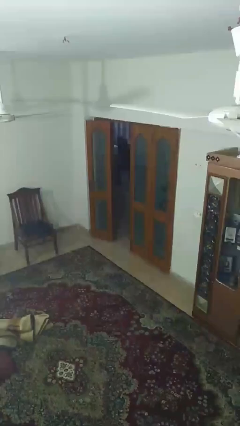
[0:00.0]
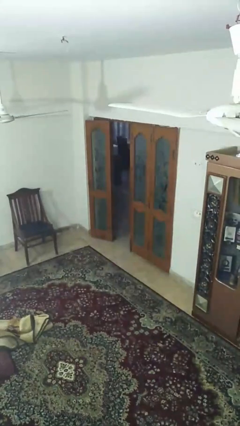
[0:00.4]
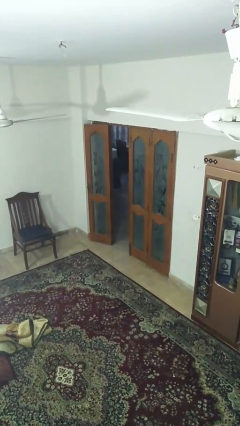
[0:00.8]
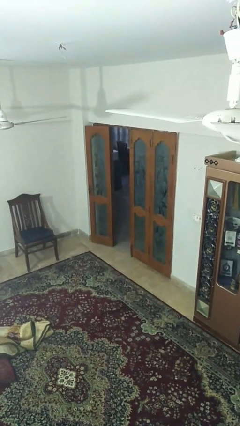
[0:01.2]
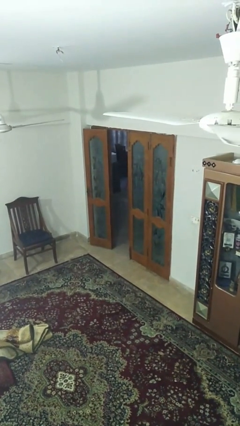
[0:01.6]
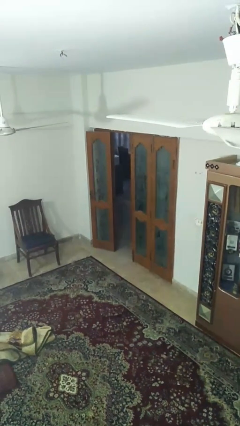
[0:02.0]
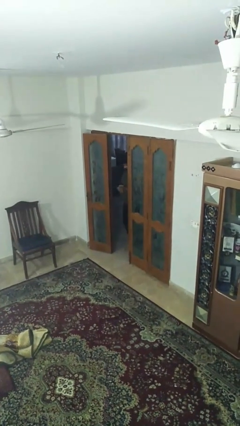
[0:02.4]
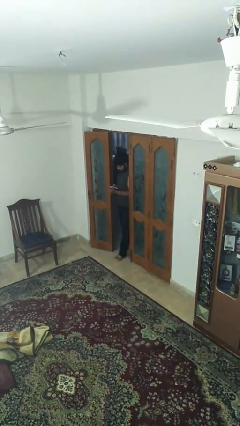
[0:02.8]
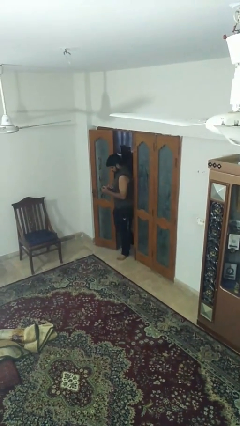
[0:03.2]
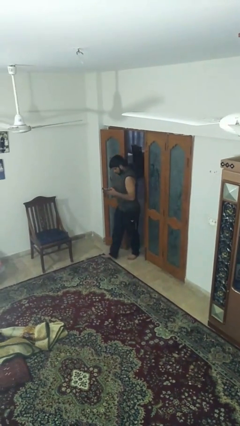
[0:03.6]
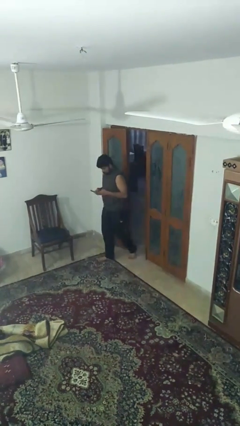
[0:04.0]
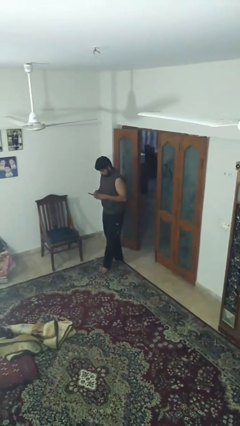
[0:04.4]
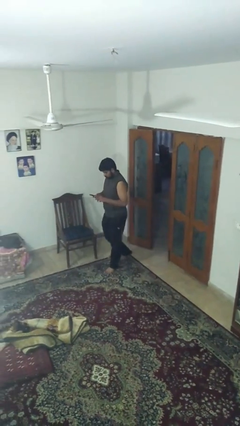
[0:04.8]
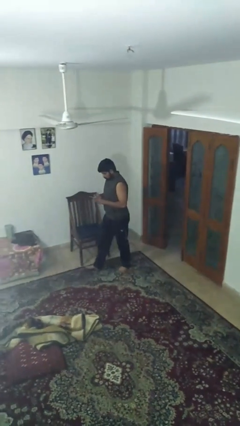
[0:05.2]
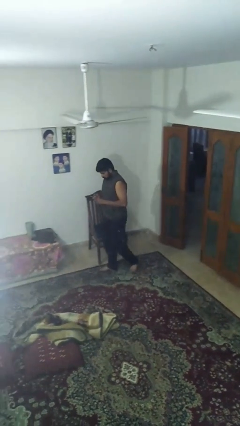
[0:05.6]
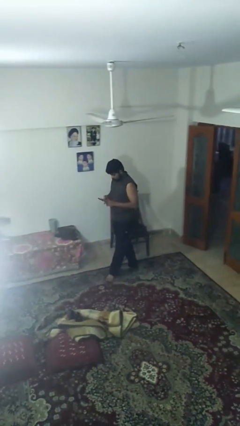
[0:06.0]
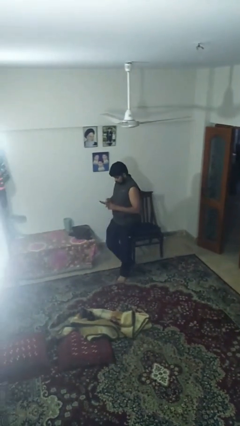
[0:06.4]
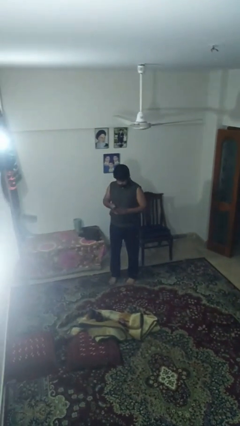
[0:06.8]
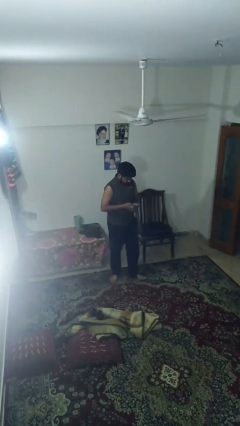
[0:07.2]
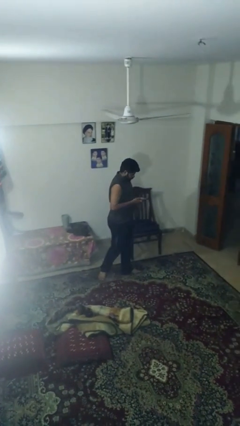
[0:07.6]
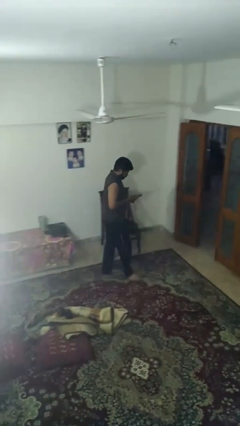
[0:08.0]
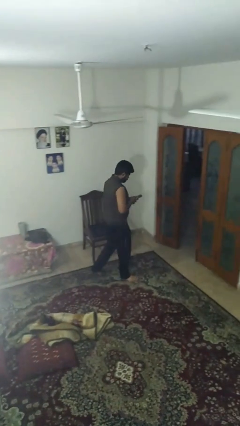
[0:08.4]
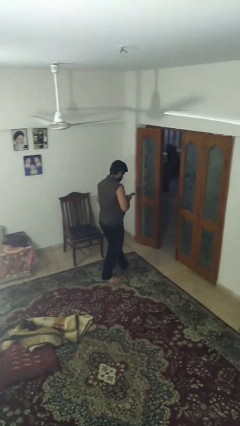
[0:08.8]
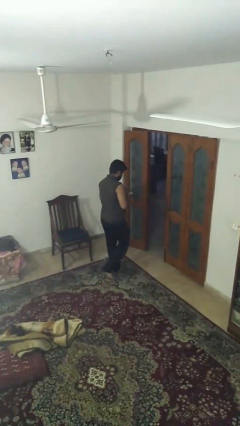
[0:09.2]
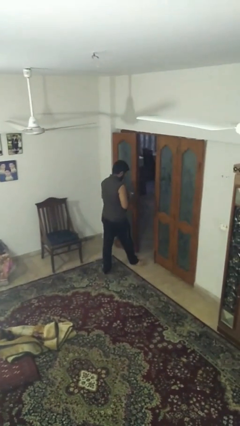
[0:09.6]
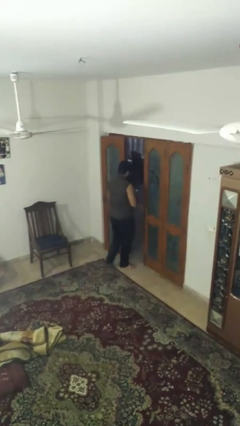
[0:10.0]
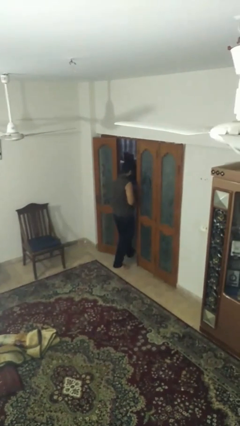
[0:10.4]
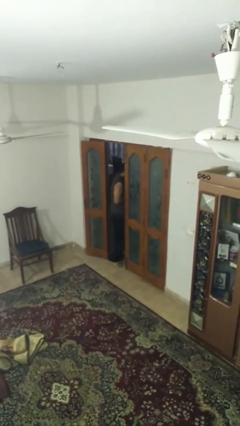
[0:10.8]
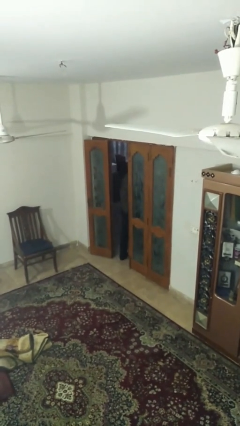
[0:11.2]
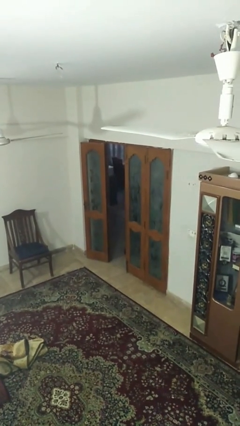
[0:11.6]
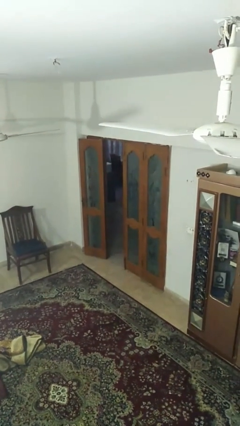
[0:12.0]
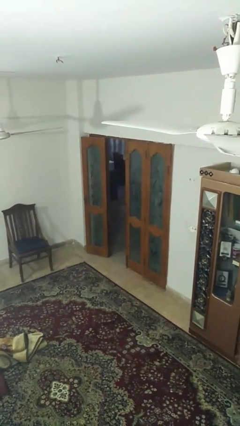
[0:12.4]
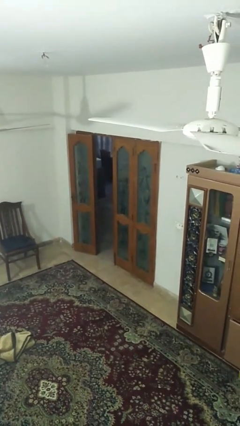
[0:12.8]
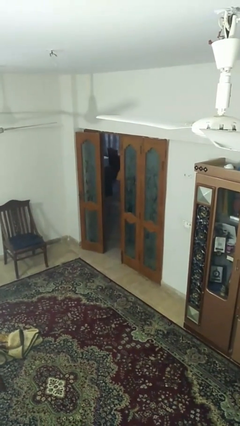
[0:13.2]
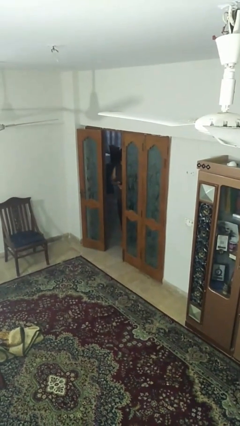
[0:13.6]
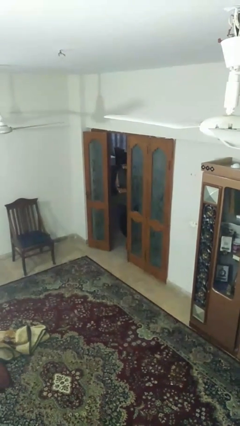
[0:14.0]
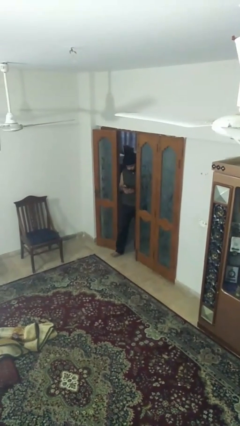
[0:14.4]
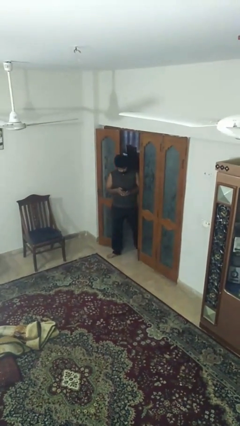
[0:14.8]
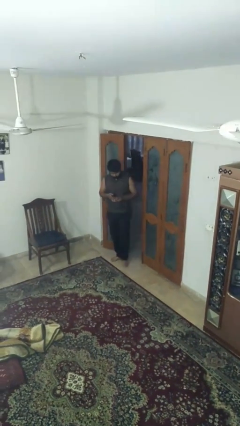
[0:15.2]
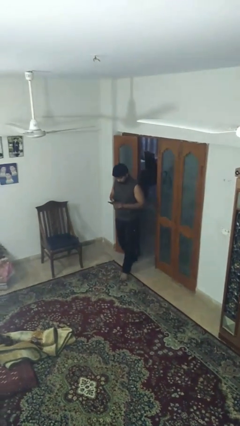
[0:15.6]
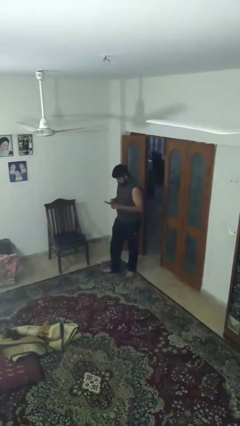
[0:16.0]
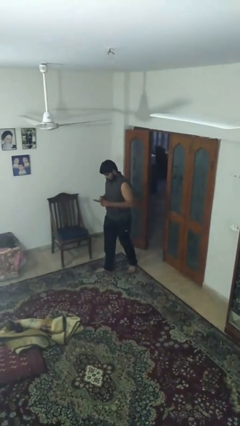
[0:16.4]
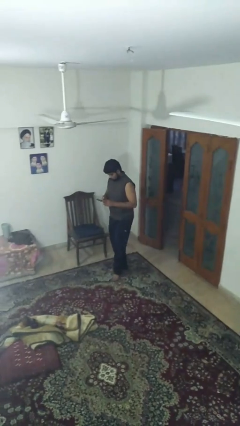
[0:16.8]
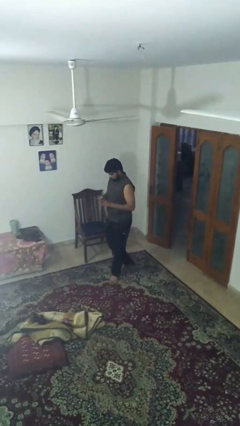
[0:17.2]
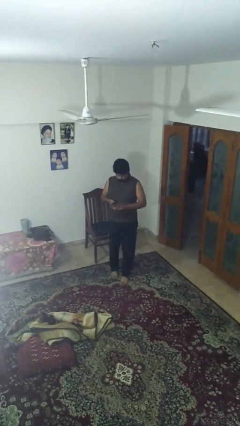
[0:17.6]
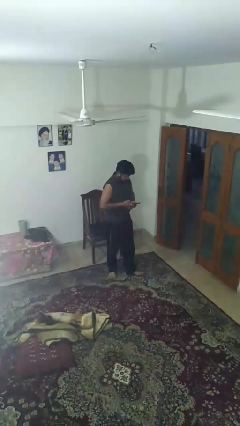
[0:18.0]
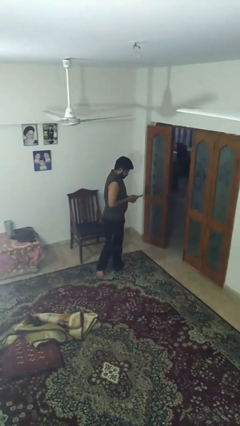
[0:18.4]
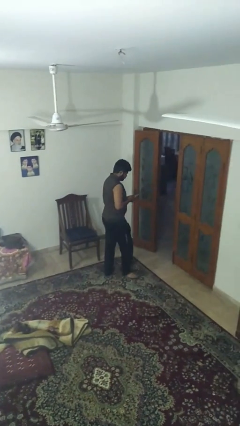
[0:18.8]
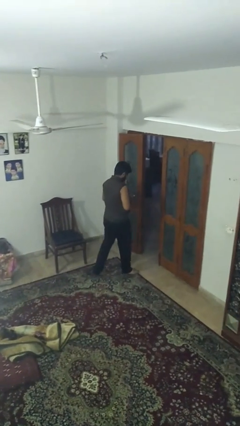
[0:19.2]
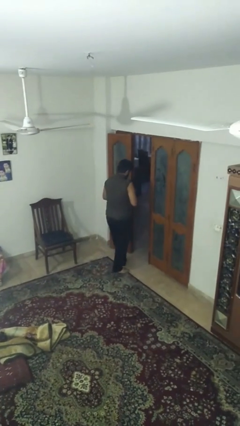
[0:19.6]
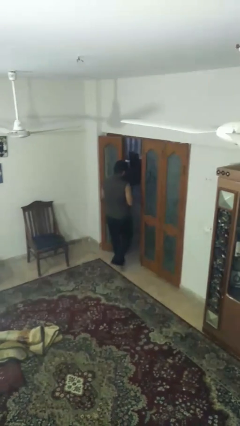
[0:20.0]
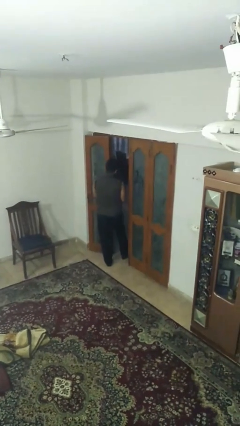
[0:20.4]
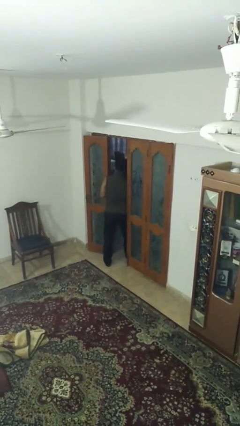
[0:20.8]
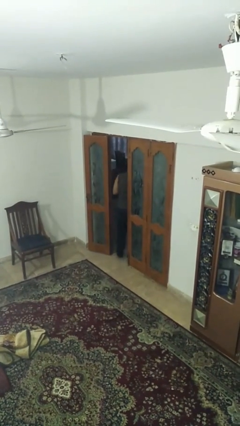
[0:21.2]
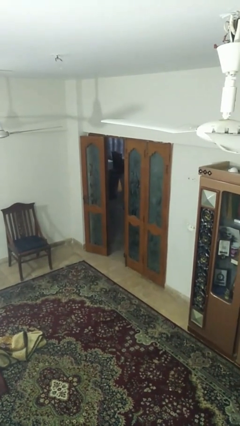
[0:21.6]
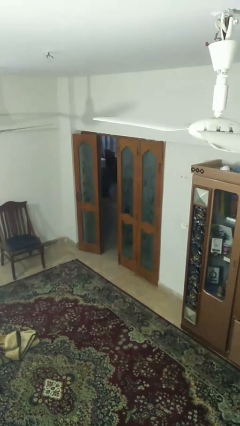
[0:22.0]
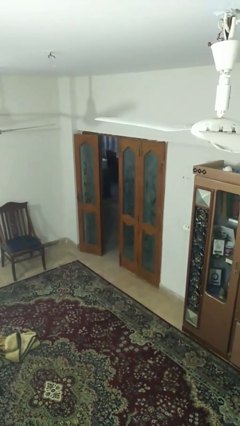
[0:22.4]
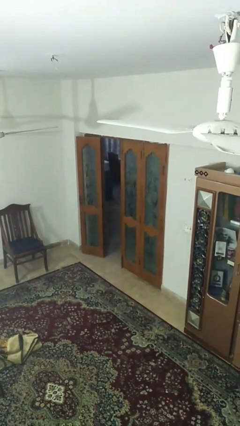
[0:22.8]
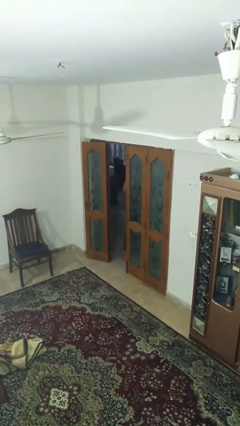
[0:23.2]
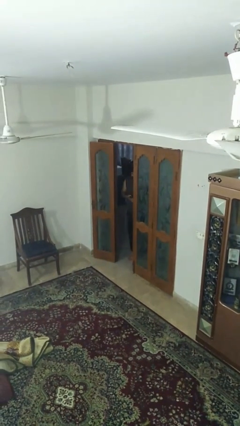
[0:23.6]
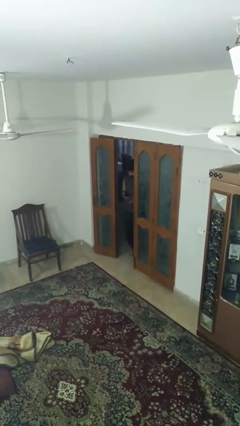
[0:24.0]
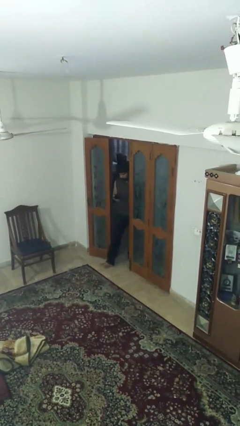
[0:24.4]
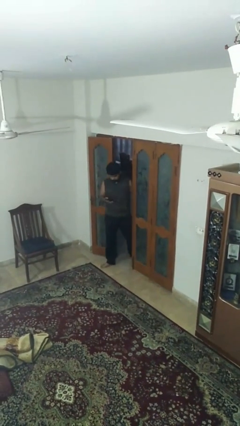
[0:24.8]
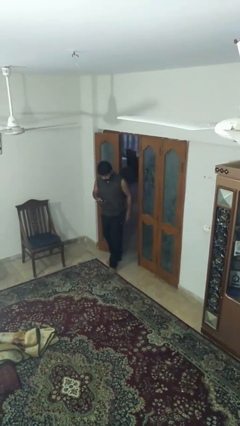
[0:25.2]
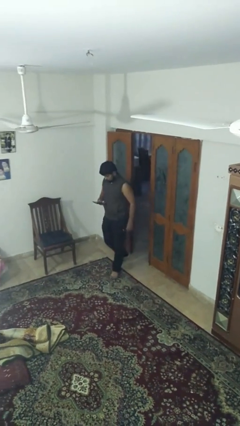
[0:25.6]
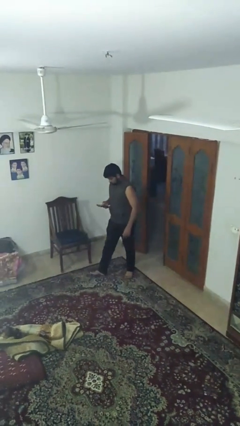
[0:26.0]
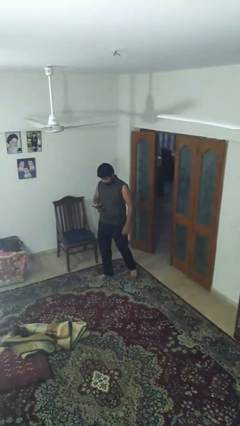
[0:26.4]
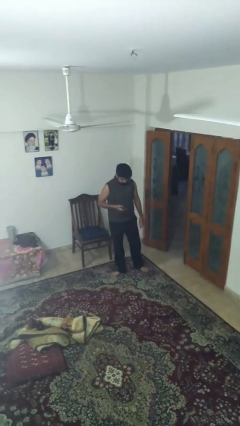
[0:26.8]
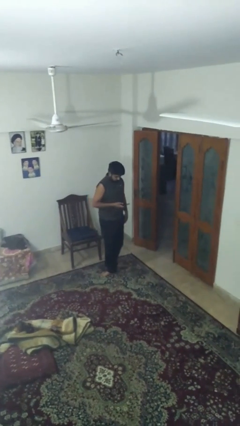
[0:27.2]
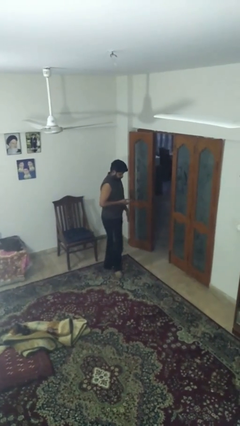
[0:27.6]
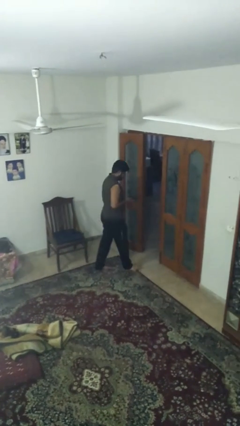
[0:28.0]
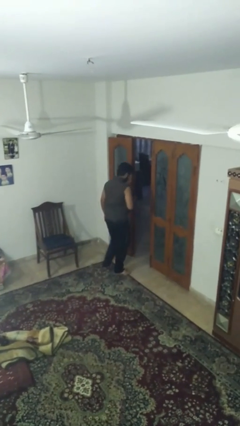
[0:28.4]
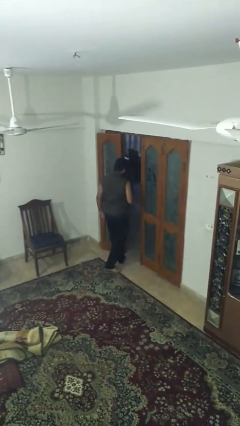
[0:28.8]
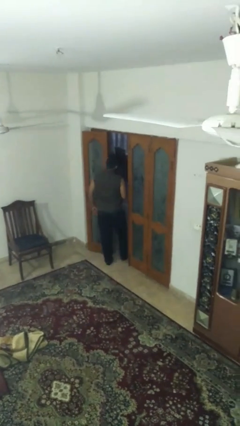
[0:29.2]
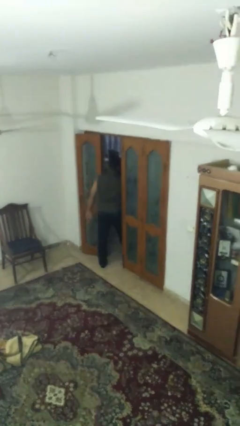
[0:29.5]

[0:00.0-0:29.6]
person texts on phone

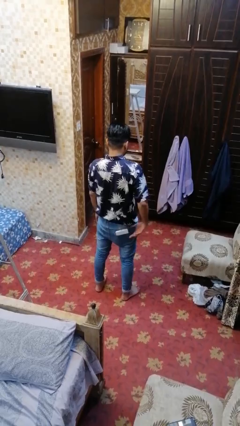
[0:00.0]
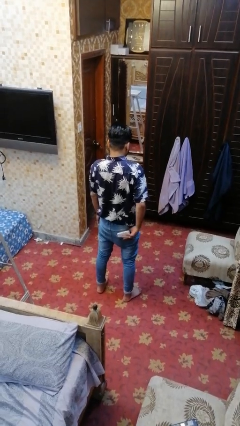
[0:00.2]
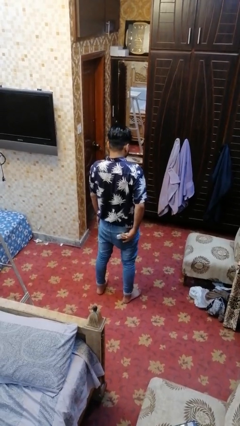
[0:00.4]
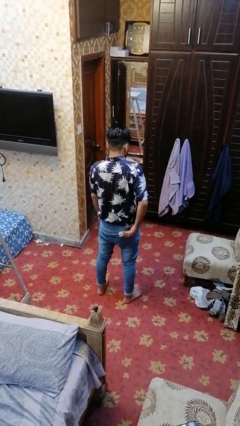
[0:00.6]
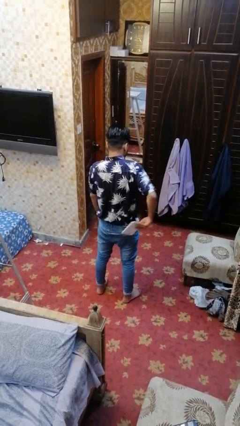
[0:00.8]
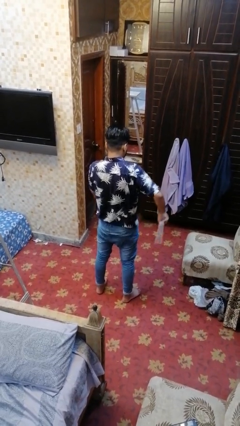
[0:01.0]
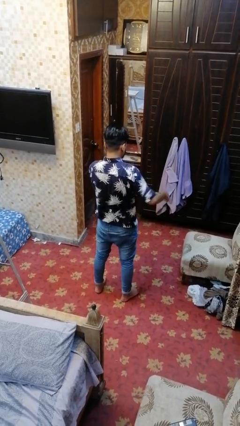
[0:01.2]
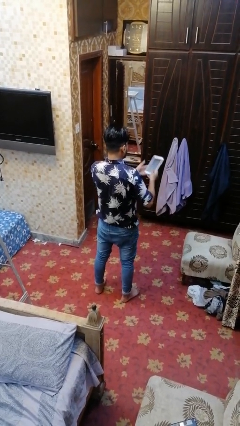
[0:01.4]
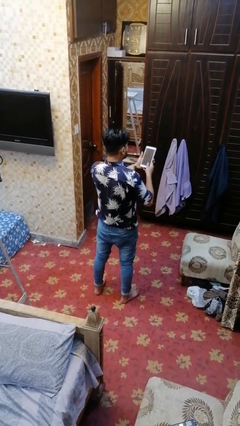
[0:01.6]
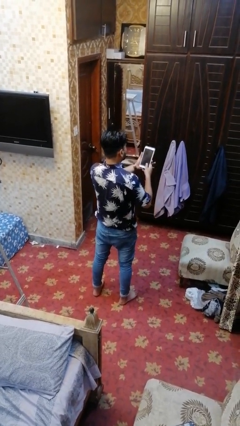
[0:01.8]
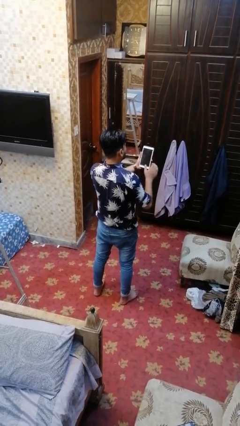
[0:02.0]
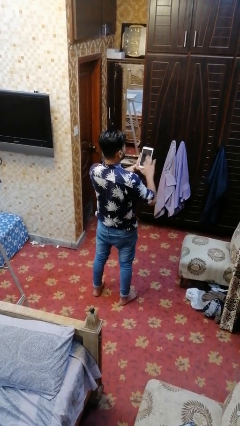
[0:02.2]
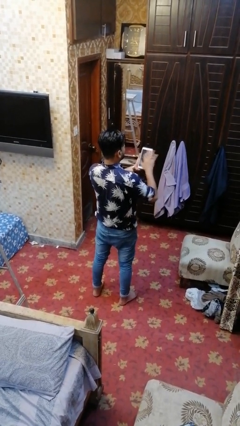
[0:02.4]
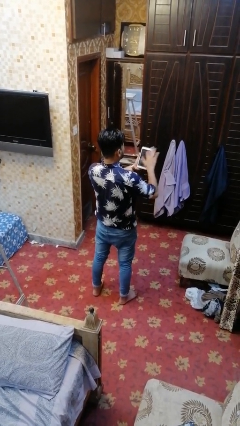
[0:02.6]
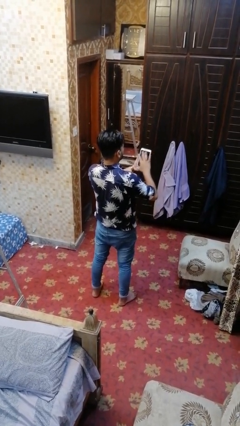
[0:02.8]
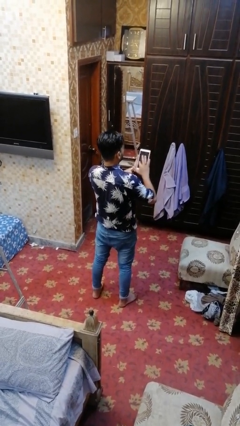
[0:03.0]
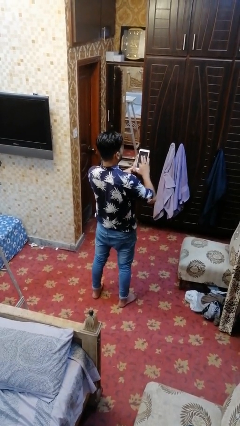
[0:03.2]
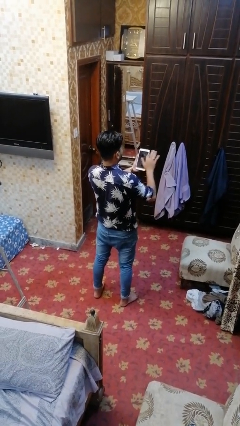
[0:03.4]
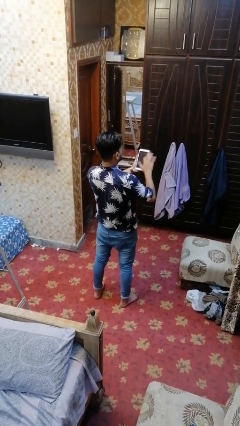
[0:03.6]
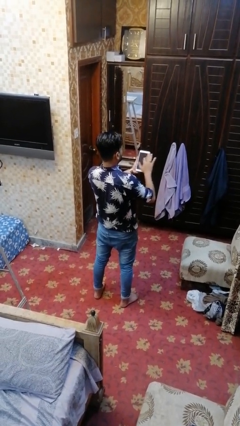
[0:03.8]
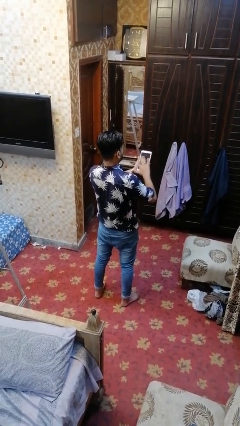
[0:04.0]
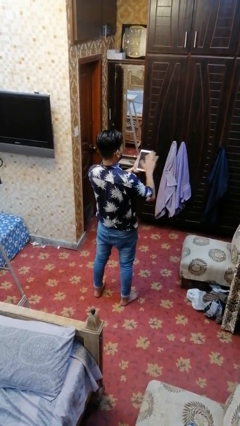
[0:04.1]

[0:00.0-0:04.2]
person takes phone from pocket
